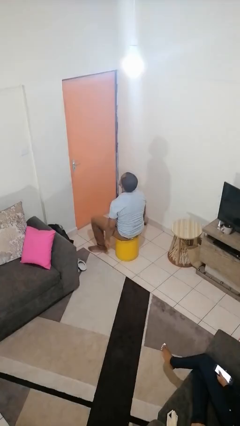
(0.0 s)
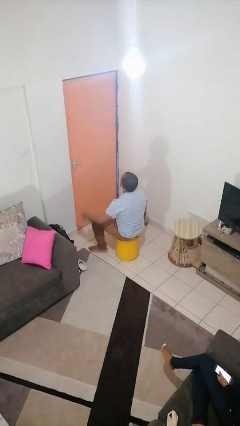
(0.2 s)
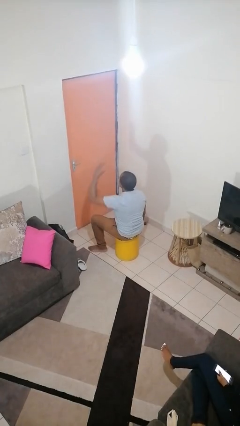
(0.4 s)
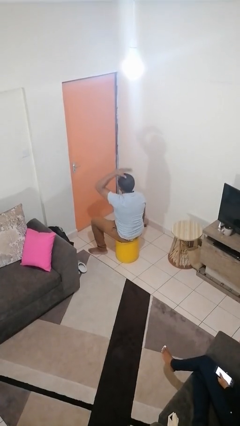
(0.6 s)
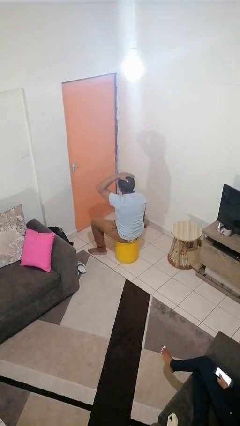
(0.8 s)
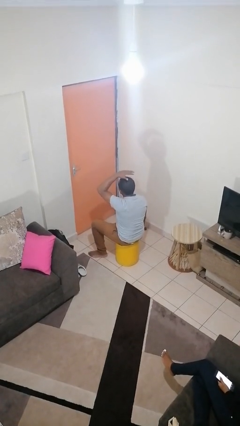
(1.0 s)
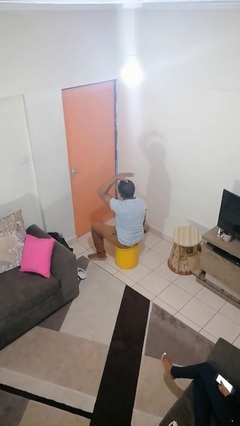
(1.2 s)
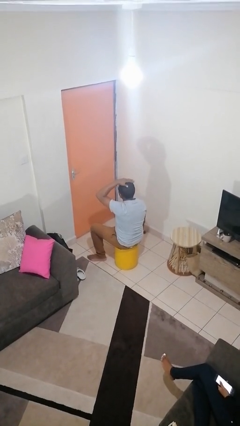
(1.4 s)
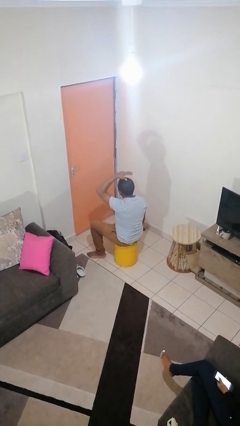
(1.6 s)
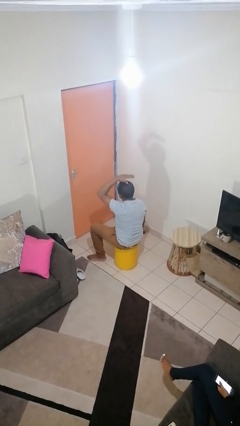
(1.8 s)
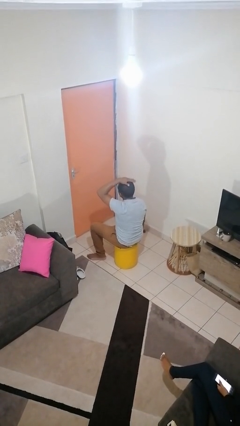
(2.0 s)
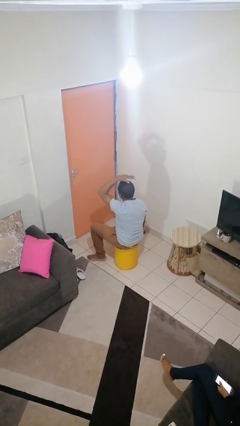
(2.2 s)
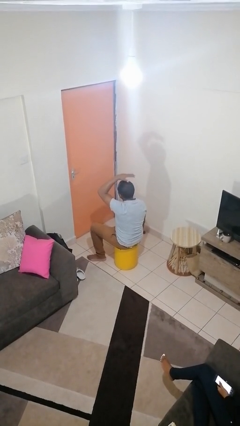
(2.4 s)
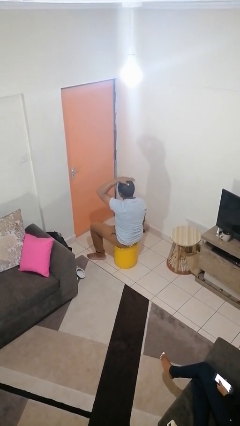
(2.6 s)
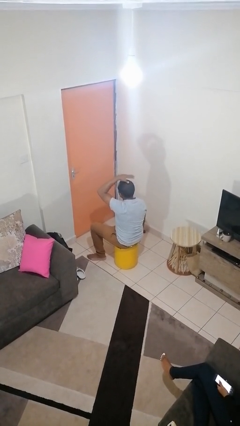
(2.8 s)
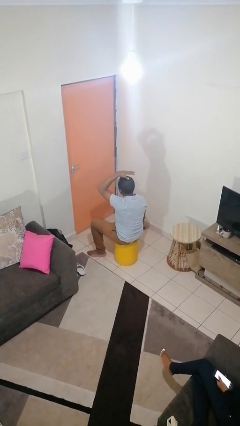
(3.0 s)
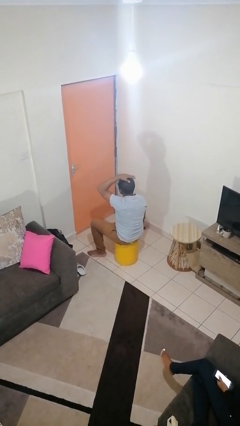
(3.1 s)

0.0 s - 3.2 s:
person pats head

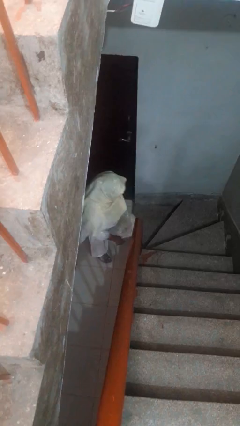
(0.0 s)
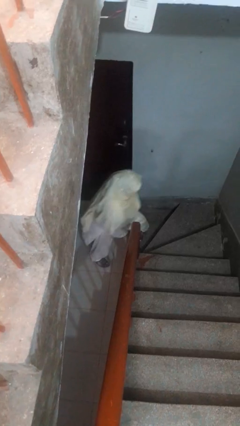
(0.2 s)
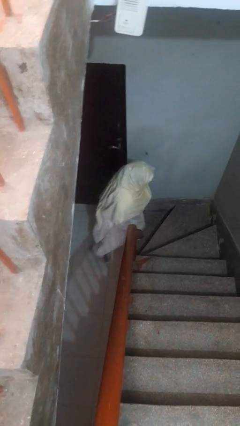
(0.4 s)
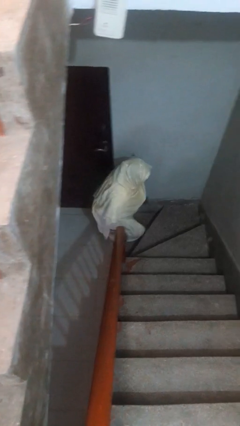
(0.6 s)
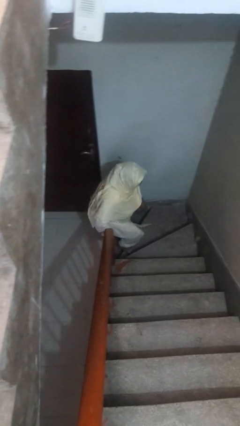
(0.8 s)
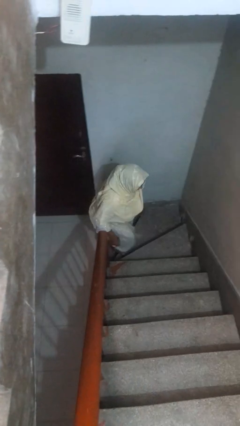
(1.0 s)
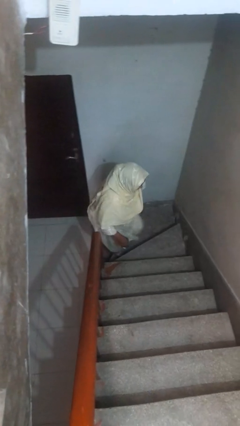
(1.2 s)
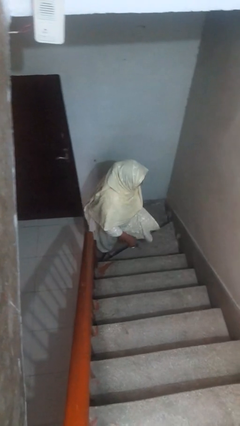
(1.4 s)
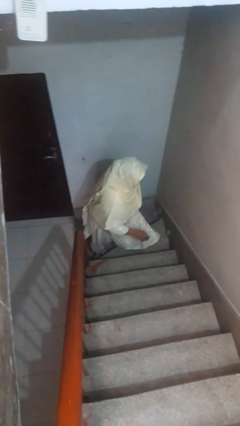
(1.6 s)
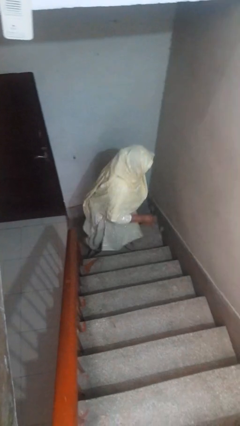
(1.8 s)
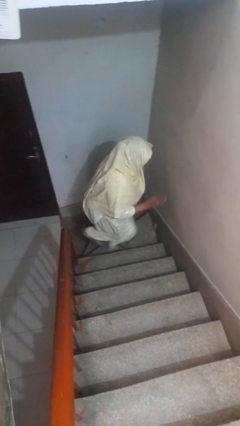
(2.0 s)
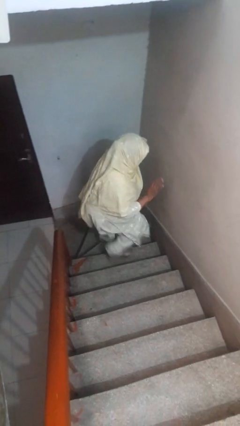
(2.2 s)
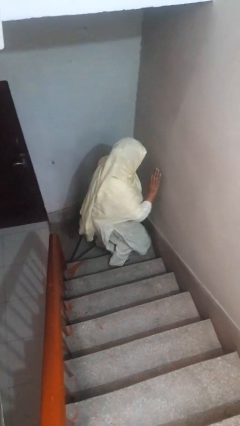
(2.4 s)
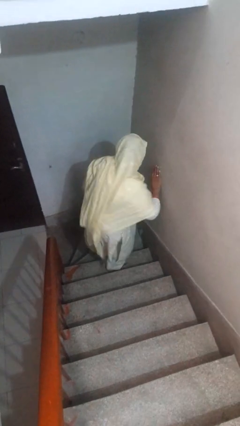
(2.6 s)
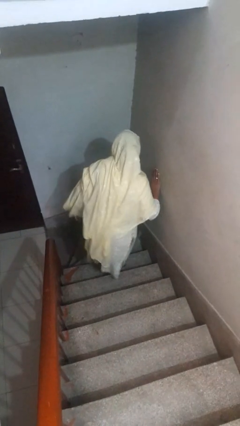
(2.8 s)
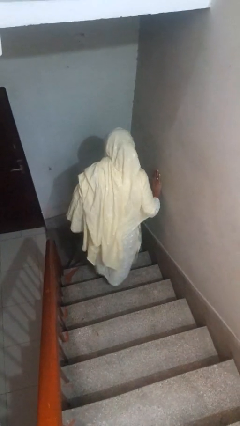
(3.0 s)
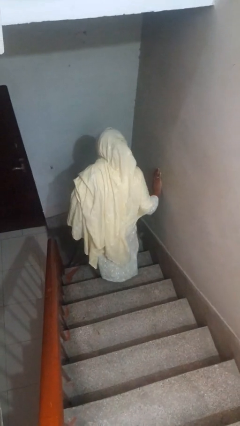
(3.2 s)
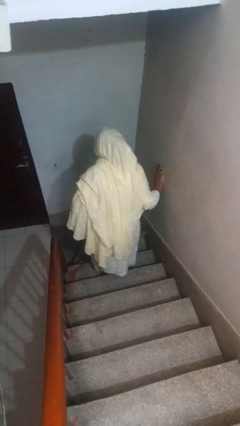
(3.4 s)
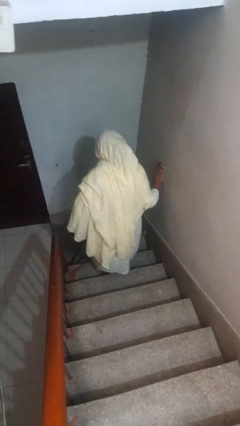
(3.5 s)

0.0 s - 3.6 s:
person climbs up stairs

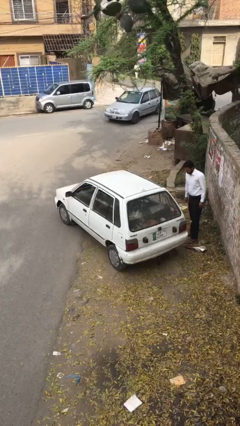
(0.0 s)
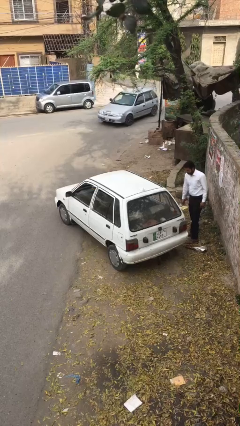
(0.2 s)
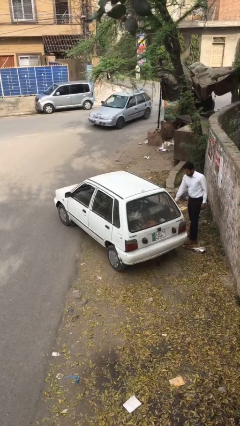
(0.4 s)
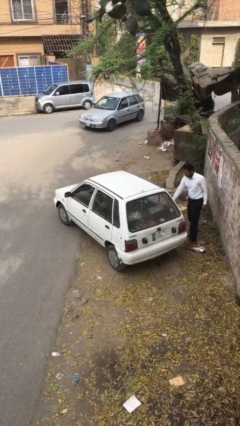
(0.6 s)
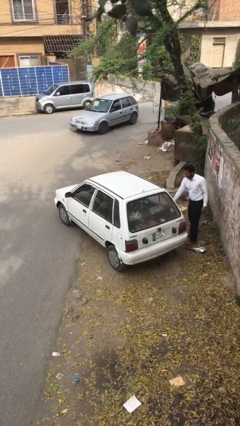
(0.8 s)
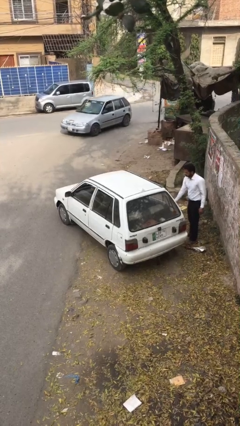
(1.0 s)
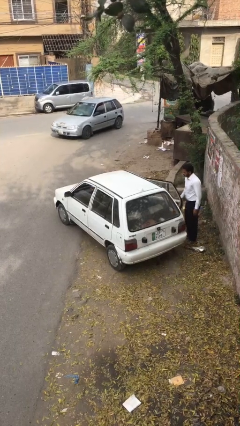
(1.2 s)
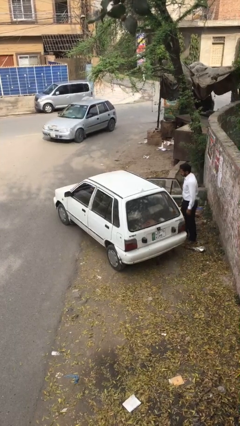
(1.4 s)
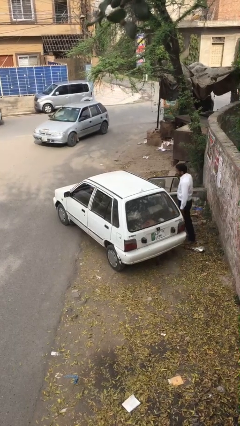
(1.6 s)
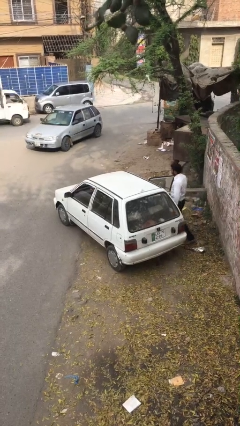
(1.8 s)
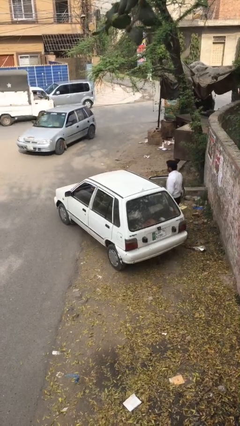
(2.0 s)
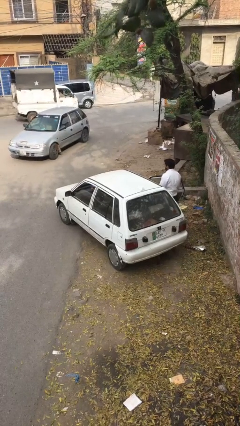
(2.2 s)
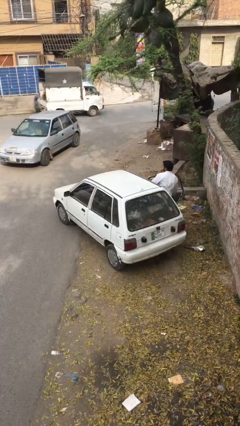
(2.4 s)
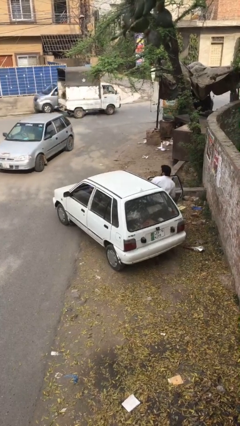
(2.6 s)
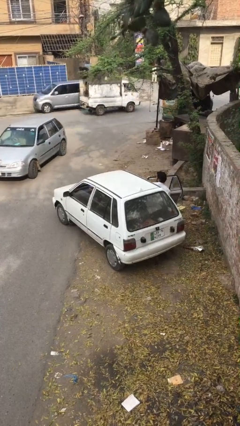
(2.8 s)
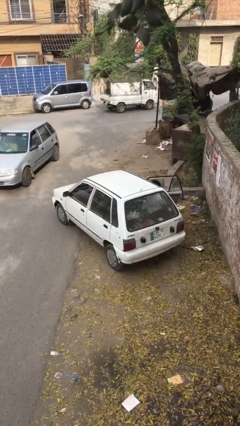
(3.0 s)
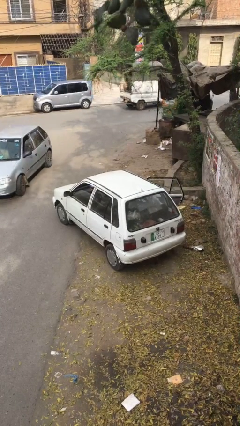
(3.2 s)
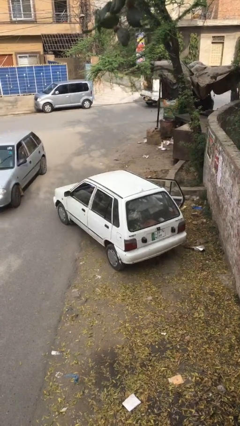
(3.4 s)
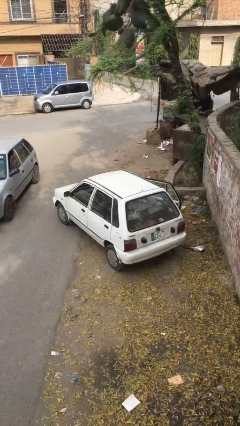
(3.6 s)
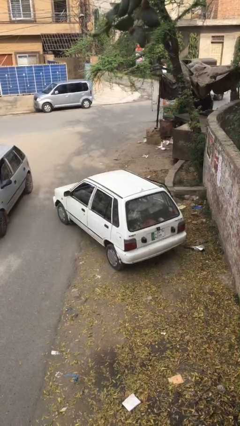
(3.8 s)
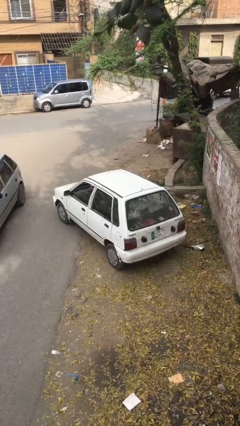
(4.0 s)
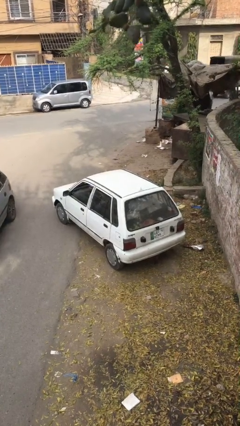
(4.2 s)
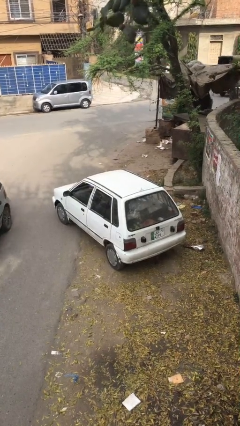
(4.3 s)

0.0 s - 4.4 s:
car picks up person

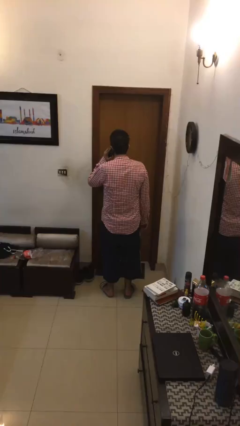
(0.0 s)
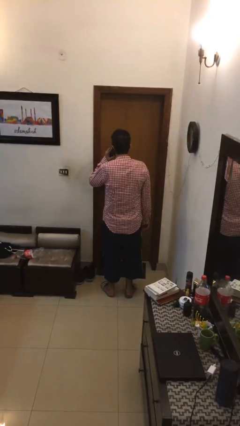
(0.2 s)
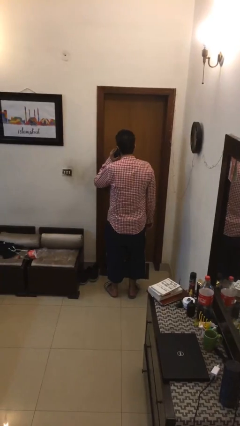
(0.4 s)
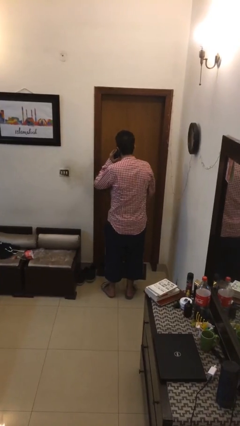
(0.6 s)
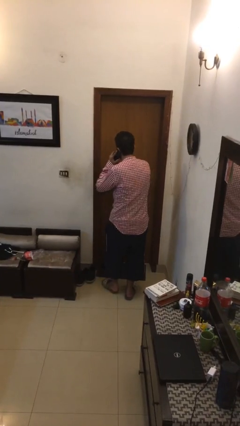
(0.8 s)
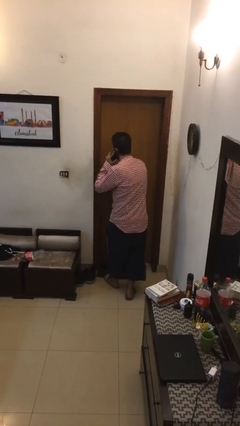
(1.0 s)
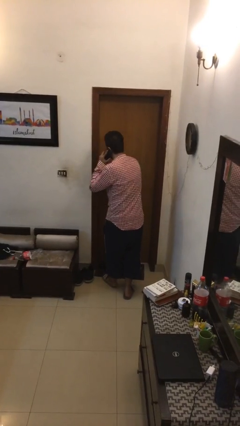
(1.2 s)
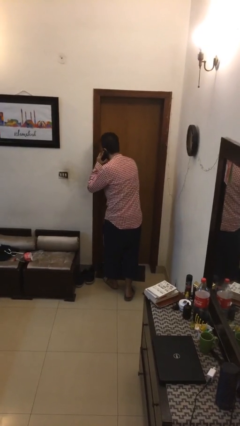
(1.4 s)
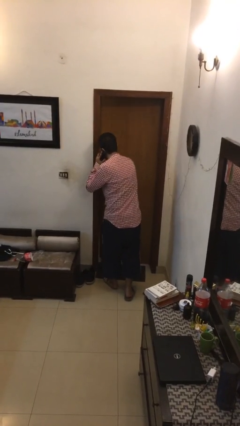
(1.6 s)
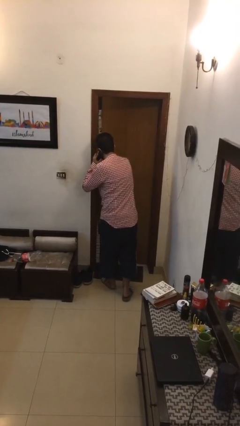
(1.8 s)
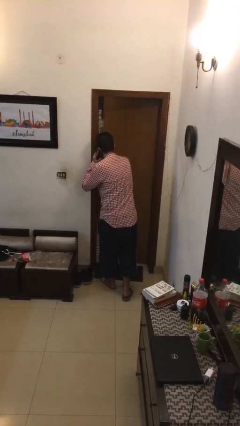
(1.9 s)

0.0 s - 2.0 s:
person opens facility door

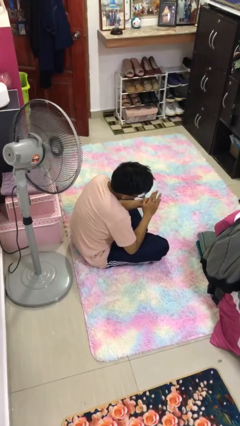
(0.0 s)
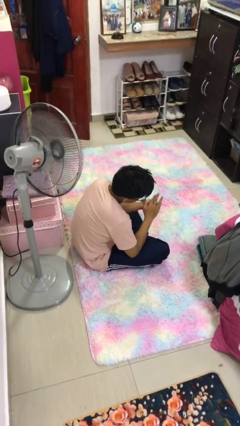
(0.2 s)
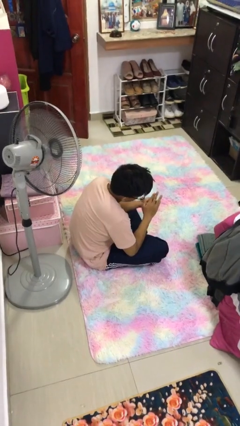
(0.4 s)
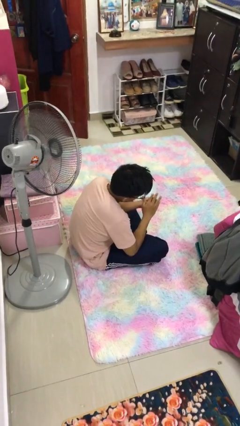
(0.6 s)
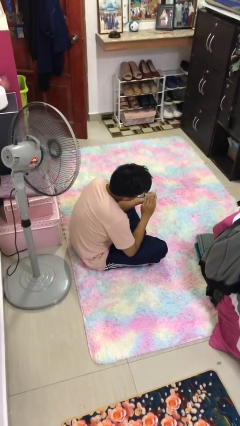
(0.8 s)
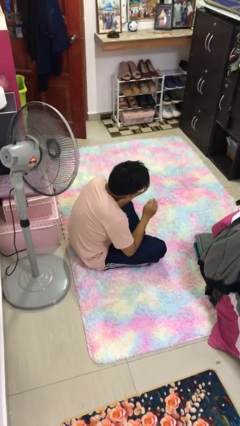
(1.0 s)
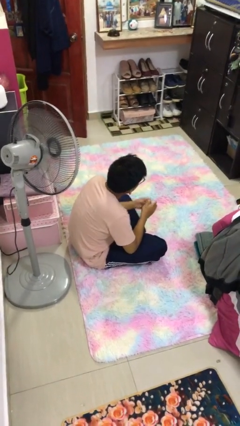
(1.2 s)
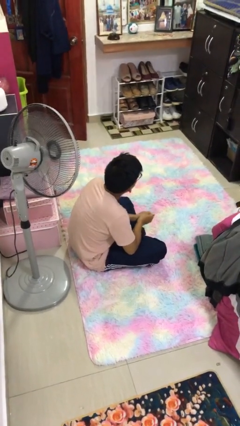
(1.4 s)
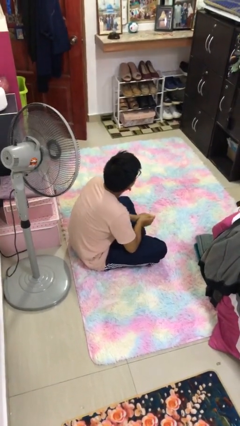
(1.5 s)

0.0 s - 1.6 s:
person takes off ring

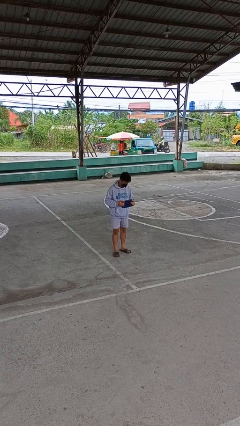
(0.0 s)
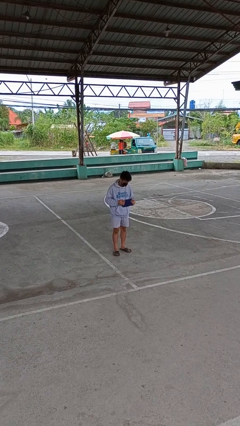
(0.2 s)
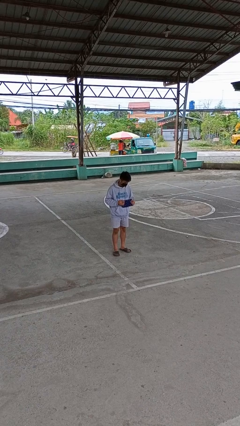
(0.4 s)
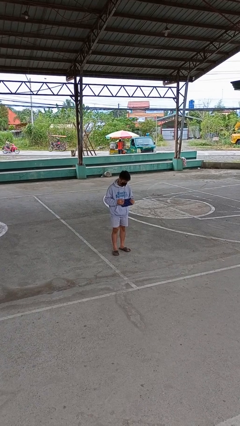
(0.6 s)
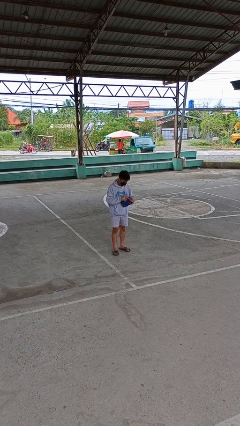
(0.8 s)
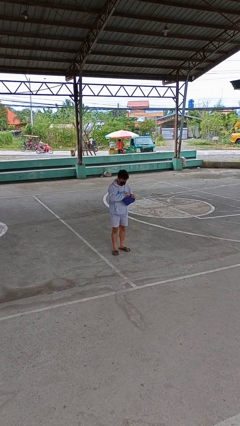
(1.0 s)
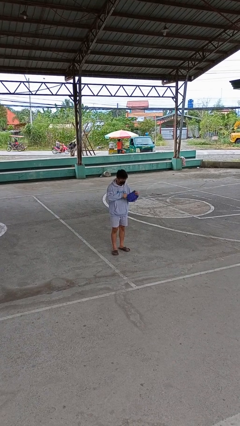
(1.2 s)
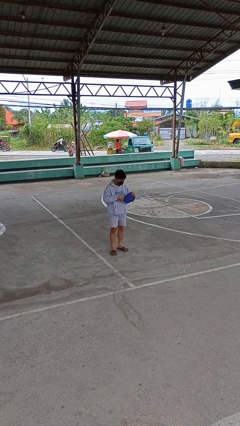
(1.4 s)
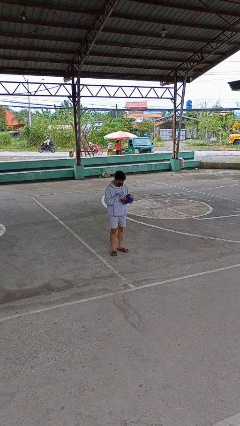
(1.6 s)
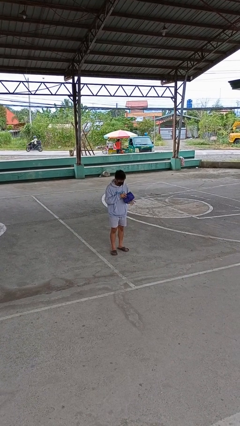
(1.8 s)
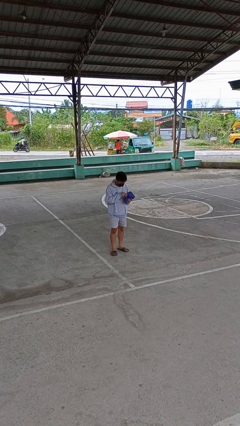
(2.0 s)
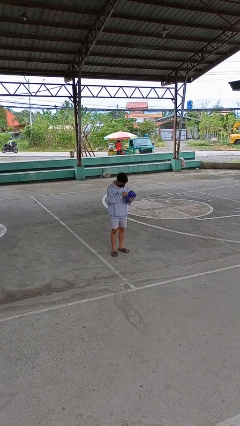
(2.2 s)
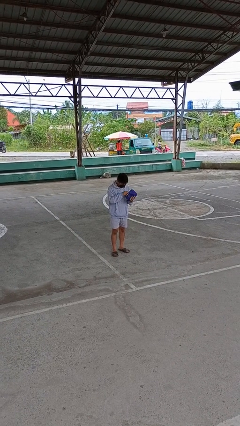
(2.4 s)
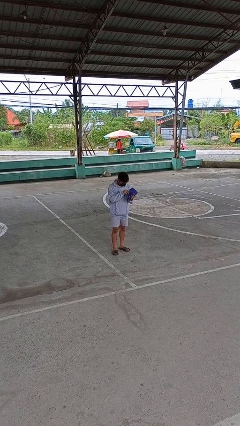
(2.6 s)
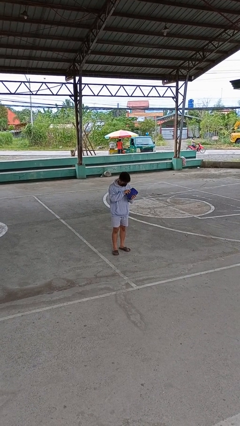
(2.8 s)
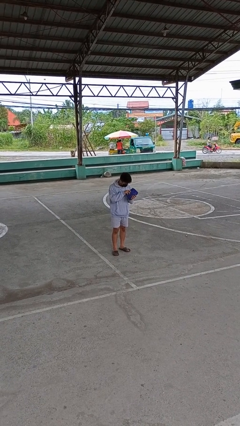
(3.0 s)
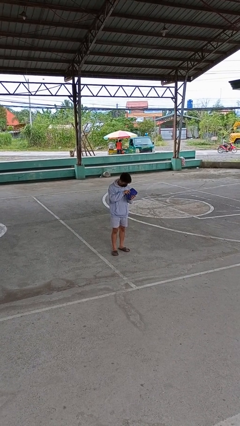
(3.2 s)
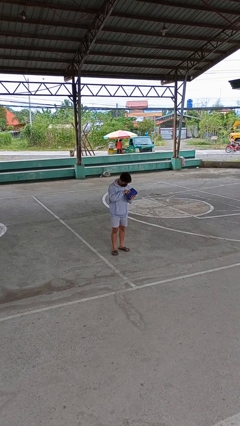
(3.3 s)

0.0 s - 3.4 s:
person searches in purse
